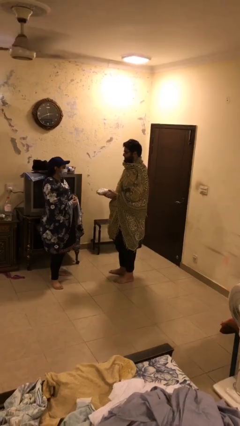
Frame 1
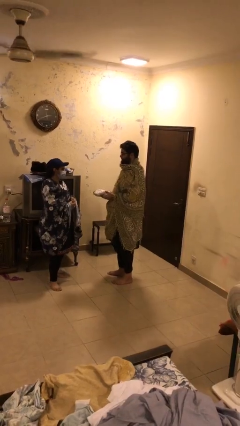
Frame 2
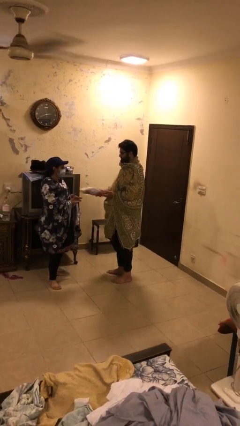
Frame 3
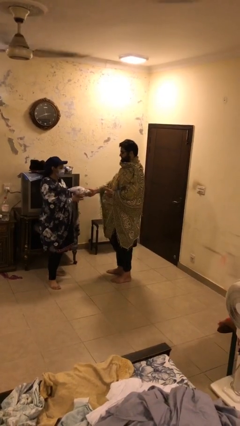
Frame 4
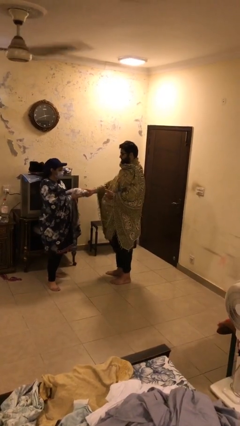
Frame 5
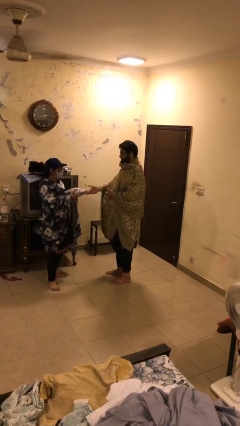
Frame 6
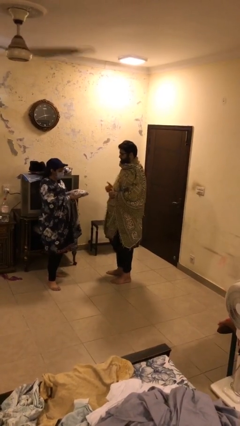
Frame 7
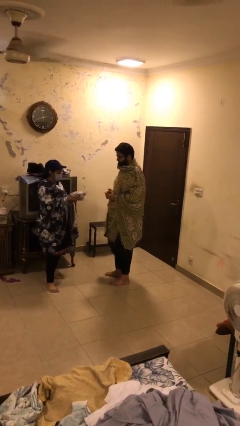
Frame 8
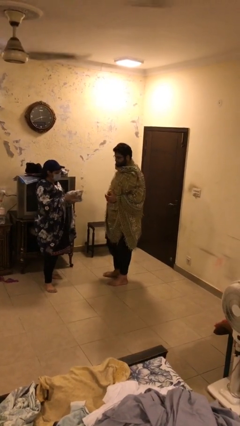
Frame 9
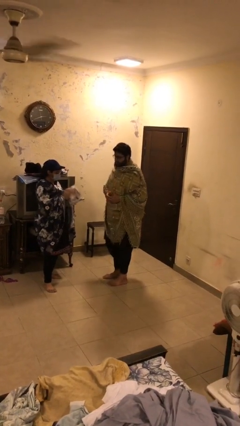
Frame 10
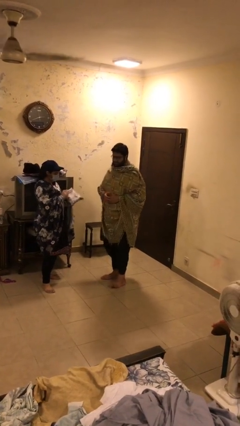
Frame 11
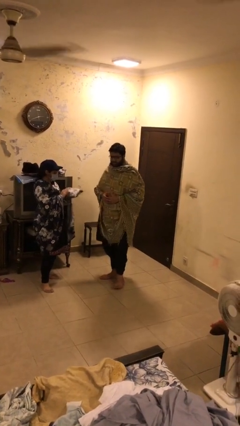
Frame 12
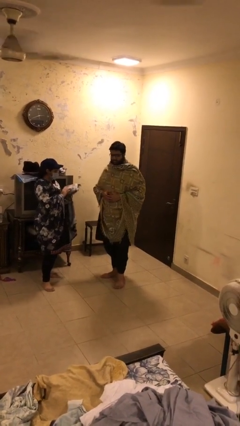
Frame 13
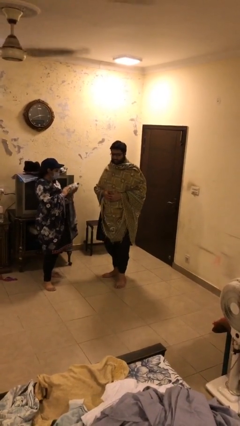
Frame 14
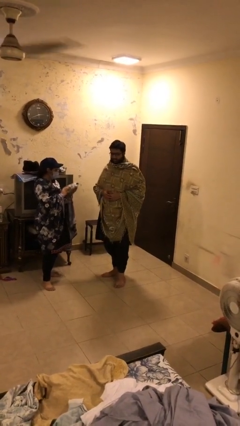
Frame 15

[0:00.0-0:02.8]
person transfers object to person

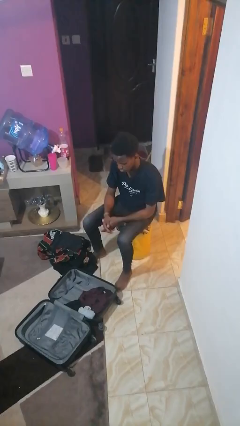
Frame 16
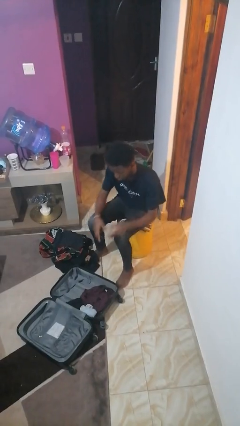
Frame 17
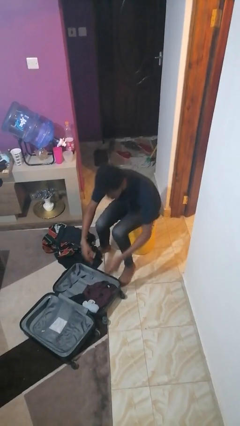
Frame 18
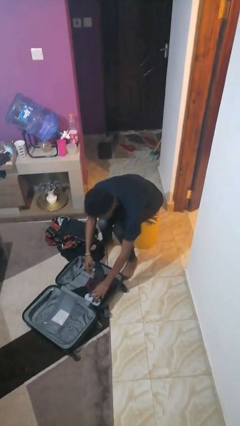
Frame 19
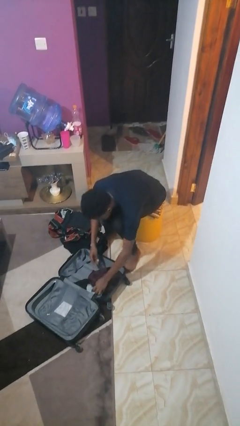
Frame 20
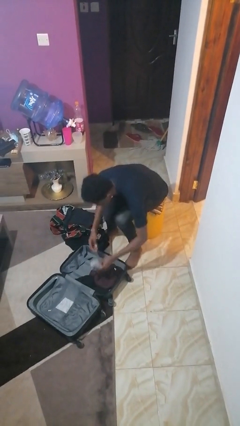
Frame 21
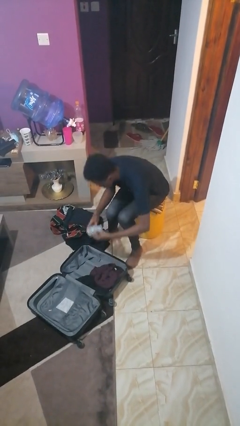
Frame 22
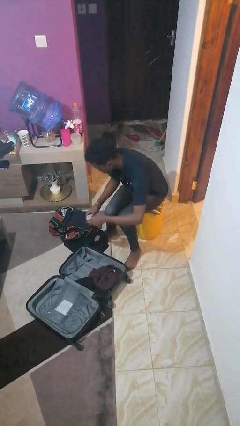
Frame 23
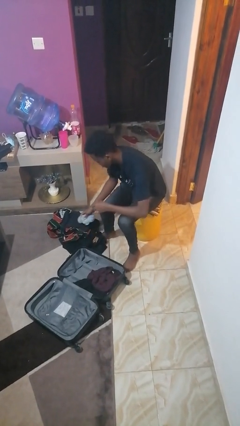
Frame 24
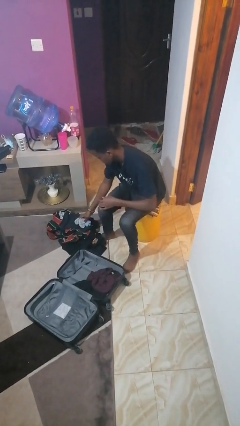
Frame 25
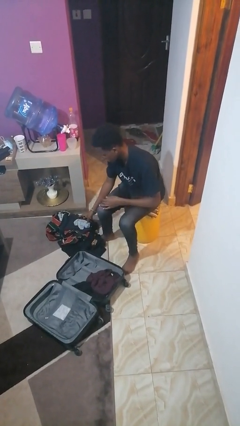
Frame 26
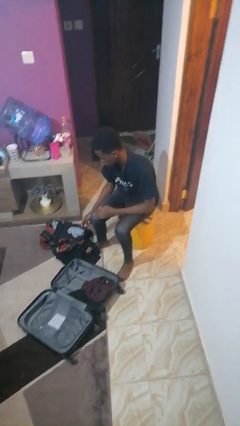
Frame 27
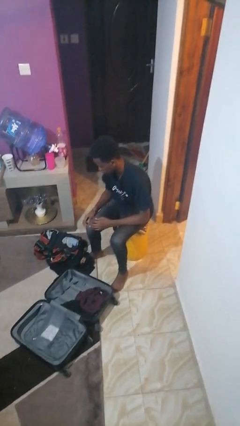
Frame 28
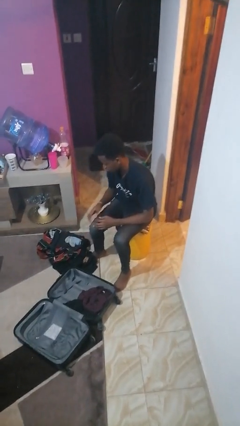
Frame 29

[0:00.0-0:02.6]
person unloads clothes from suitcase

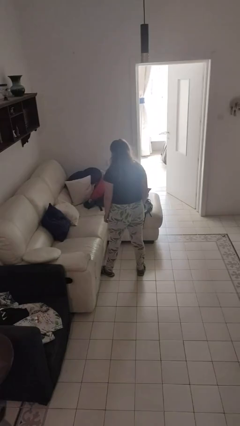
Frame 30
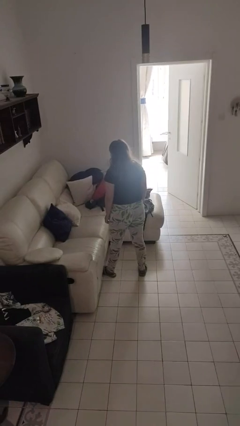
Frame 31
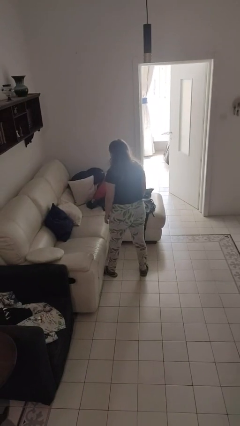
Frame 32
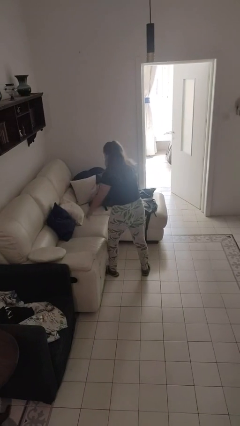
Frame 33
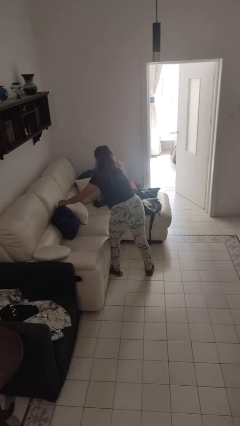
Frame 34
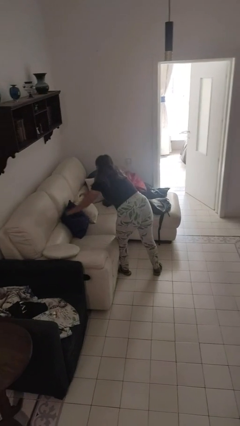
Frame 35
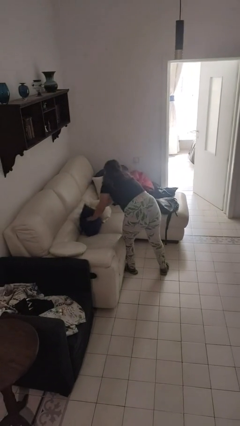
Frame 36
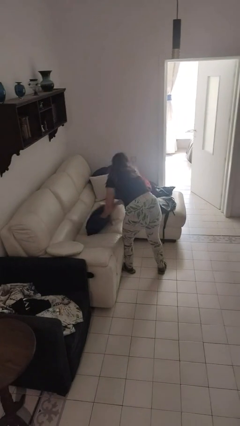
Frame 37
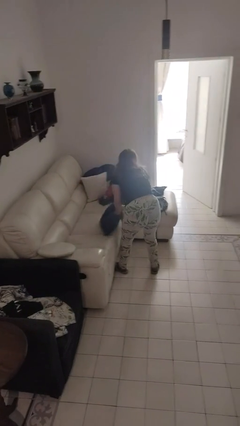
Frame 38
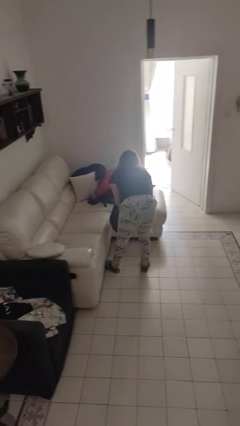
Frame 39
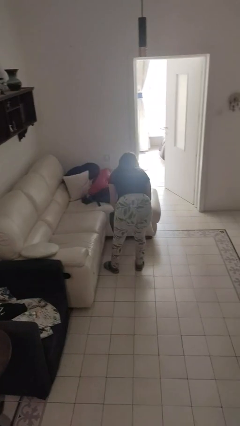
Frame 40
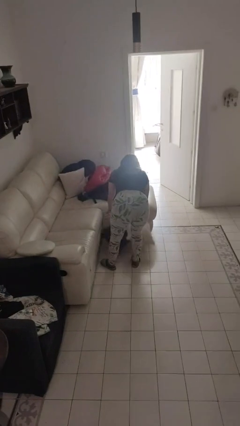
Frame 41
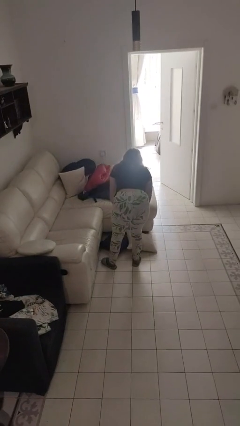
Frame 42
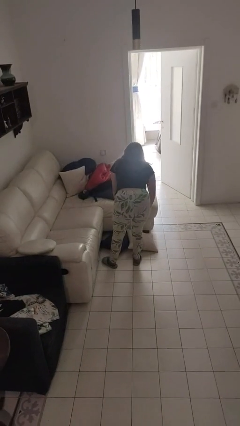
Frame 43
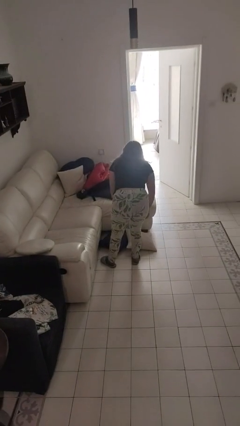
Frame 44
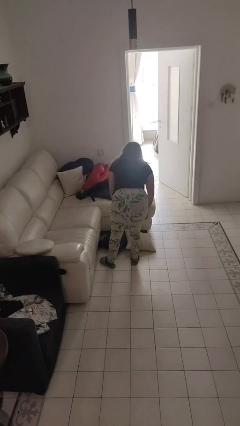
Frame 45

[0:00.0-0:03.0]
person knocks over furniture

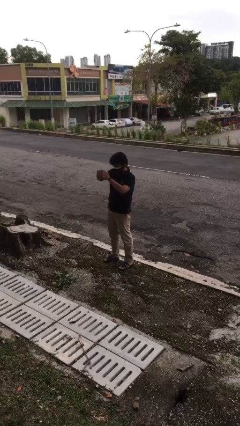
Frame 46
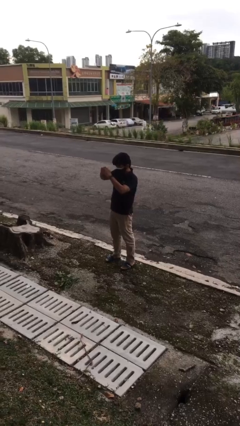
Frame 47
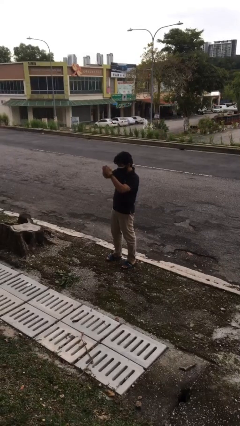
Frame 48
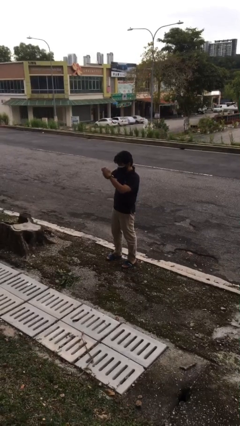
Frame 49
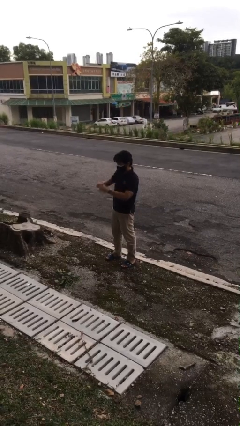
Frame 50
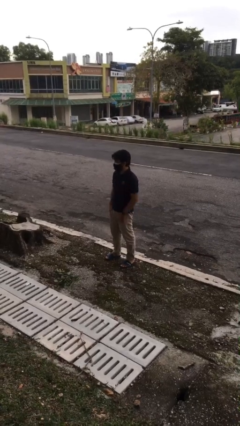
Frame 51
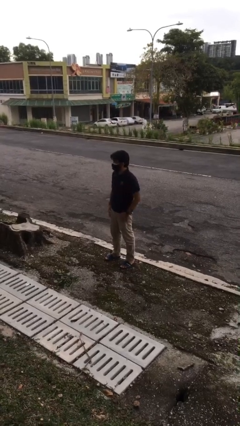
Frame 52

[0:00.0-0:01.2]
person gestures heart

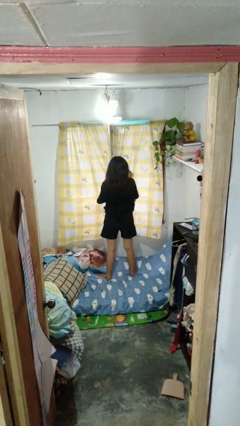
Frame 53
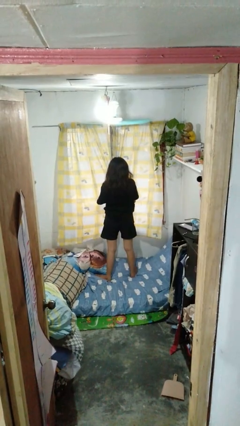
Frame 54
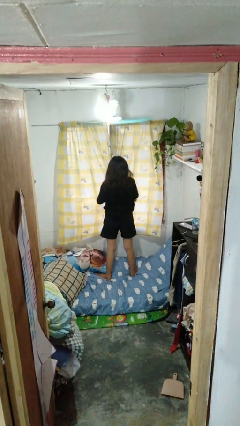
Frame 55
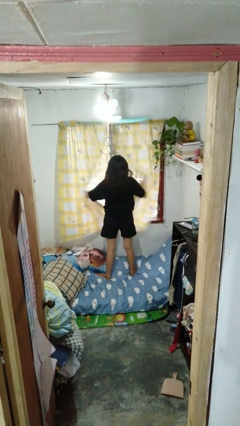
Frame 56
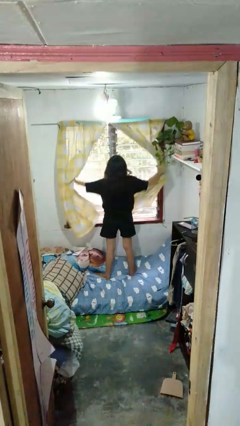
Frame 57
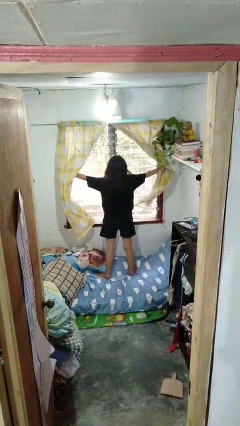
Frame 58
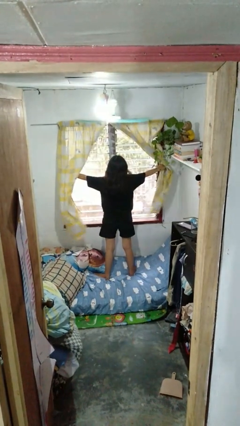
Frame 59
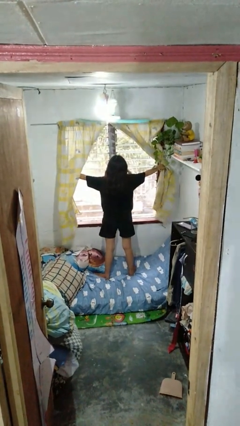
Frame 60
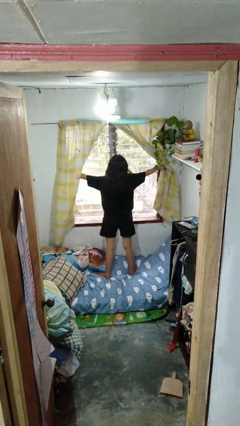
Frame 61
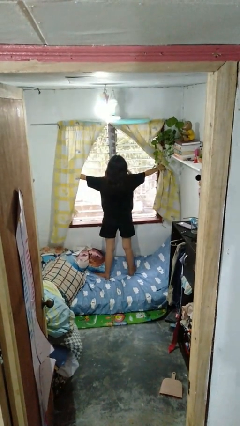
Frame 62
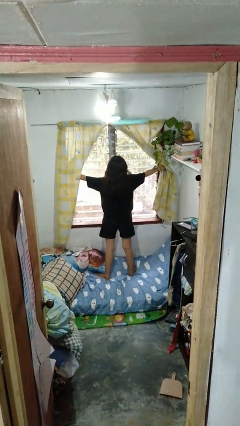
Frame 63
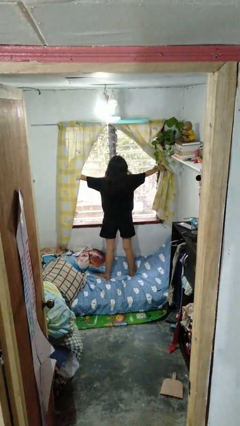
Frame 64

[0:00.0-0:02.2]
person opens curtains

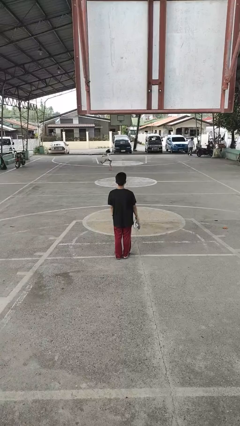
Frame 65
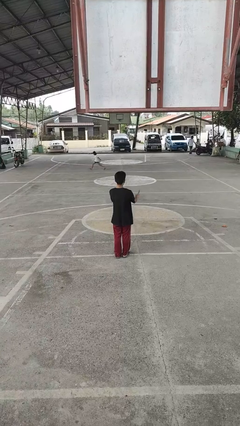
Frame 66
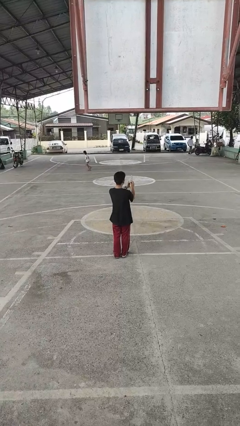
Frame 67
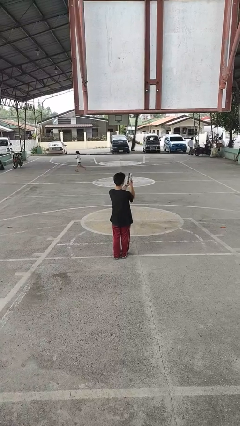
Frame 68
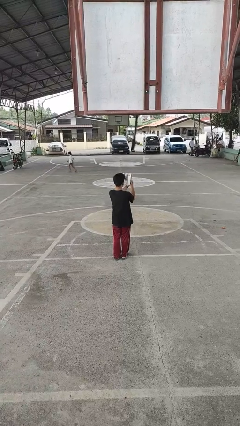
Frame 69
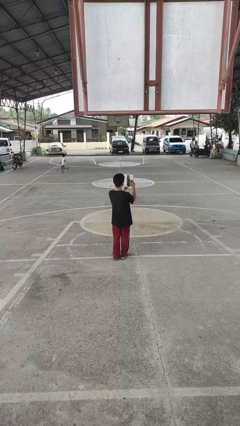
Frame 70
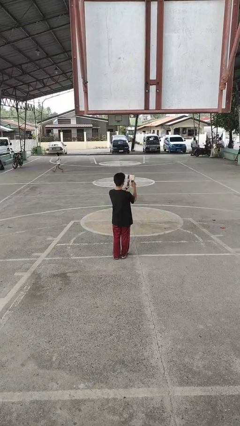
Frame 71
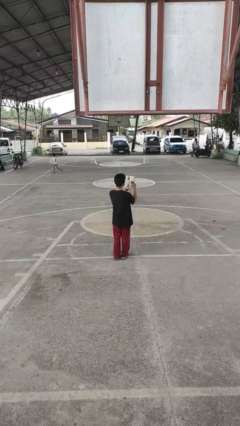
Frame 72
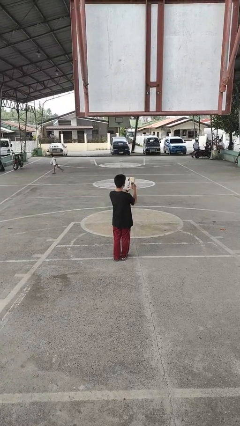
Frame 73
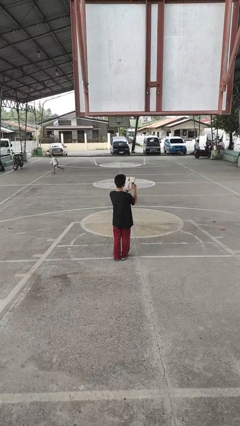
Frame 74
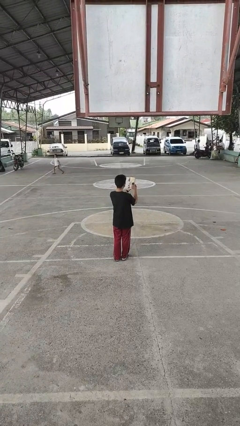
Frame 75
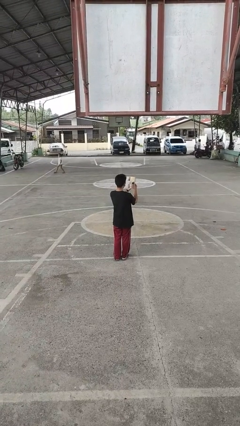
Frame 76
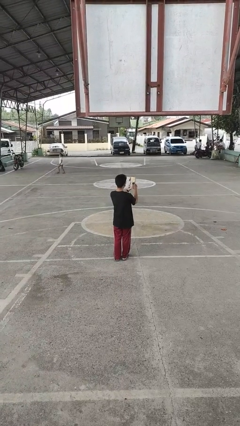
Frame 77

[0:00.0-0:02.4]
person reads magazine

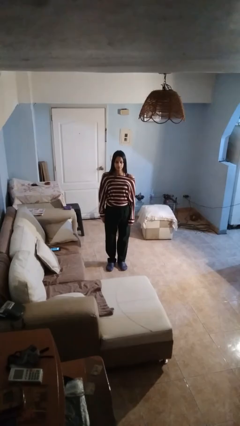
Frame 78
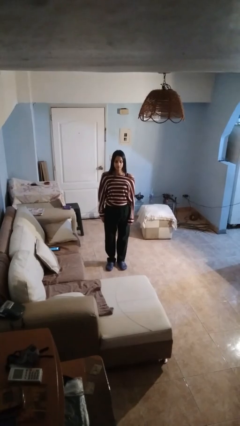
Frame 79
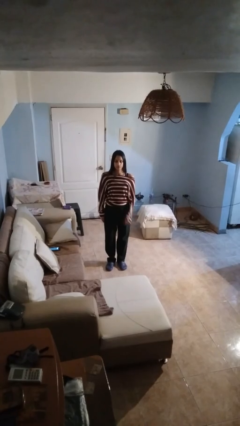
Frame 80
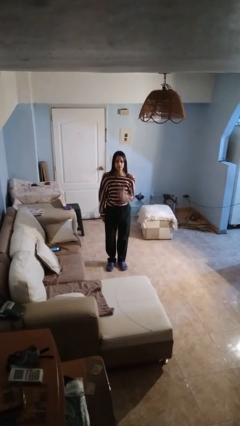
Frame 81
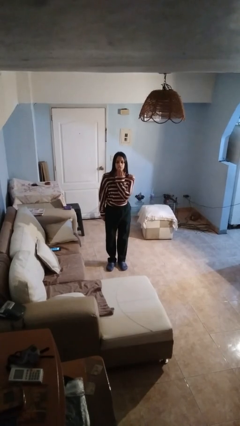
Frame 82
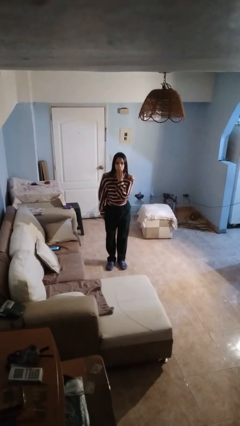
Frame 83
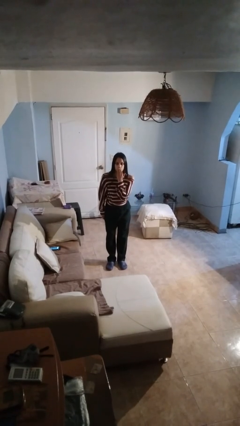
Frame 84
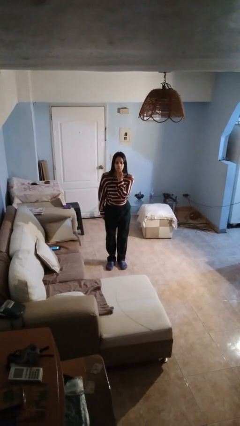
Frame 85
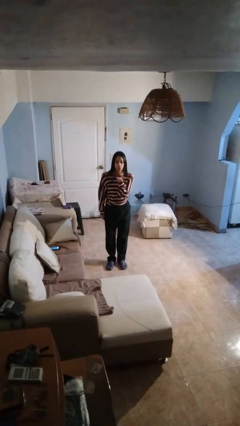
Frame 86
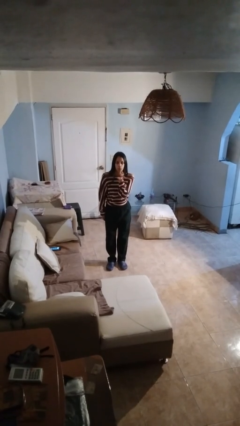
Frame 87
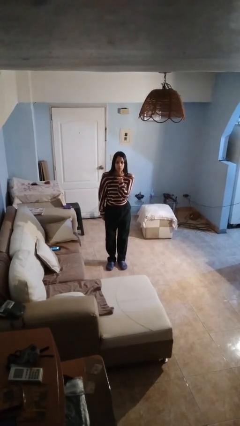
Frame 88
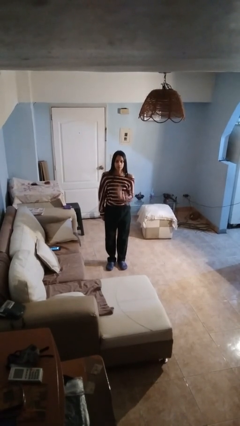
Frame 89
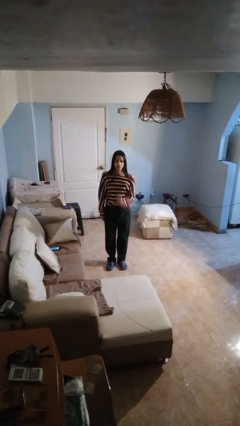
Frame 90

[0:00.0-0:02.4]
person gestures blow kiss

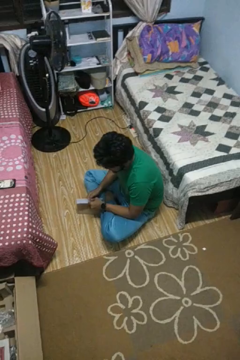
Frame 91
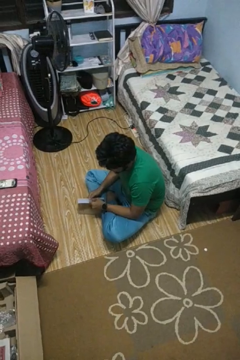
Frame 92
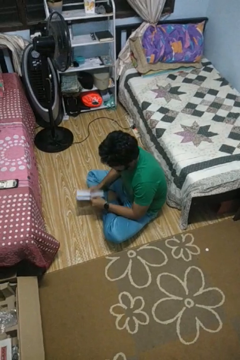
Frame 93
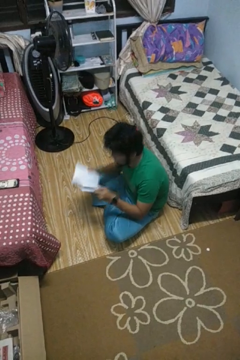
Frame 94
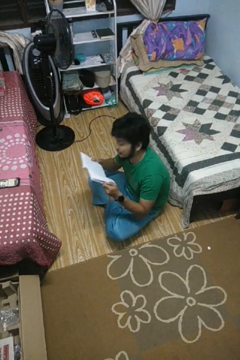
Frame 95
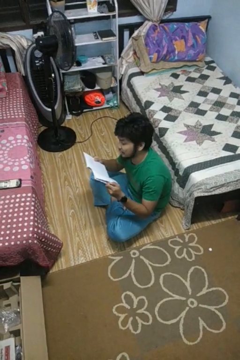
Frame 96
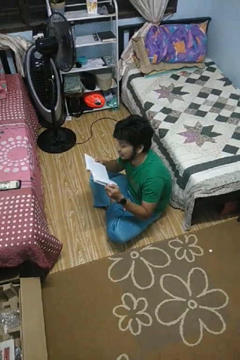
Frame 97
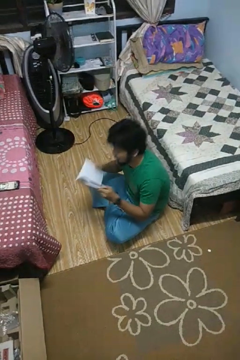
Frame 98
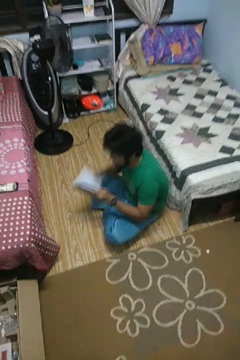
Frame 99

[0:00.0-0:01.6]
person reads book
